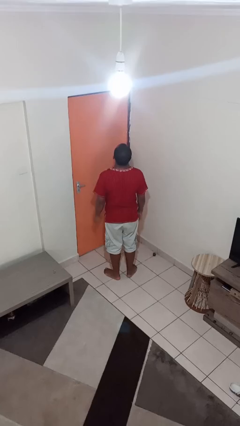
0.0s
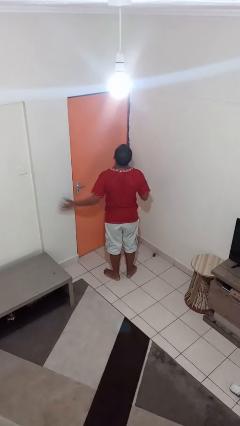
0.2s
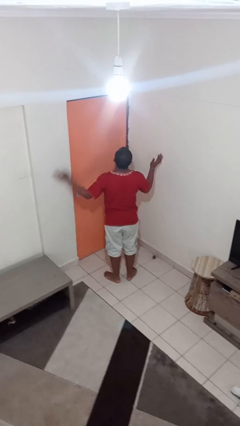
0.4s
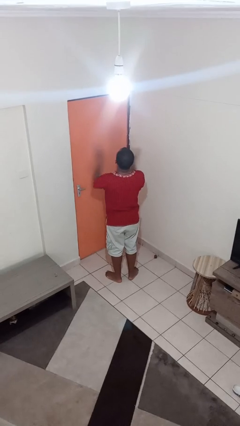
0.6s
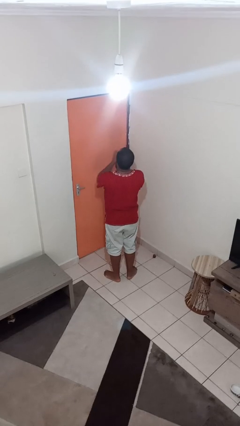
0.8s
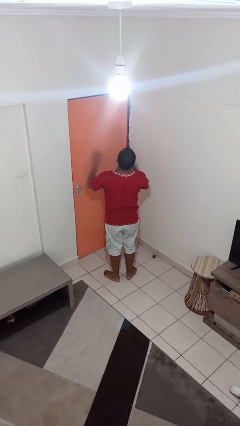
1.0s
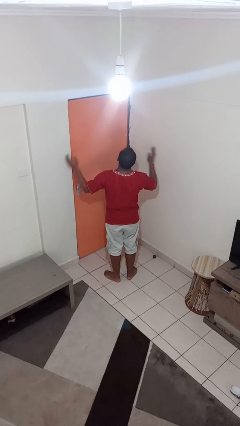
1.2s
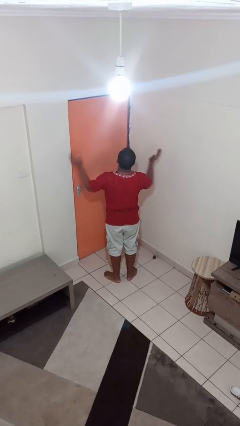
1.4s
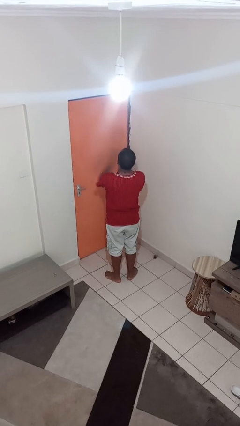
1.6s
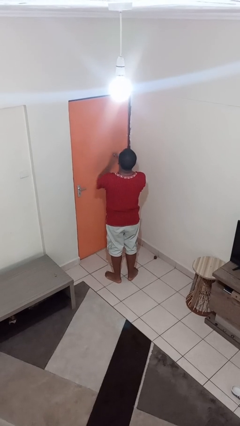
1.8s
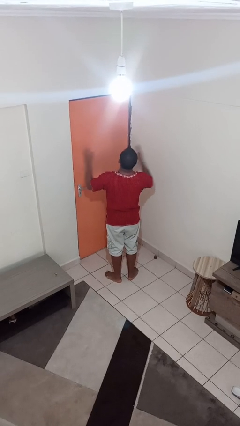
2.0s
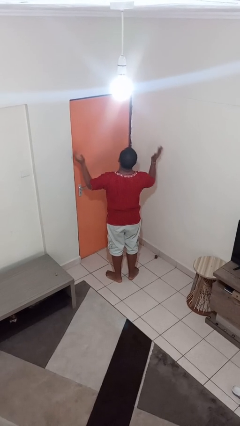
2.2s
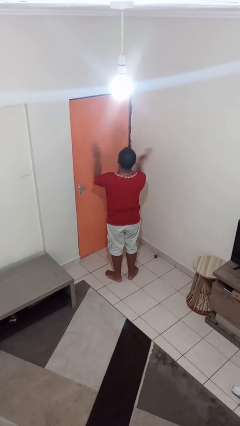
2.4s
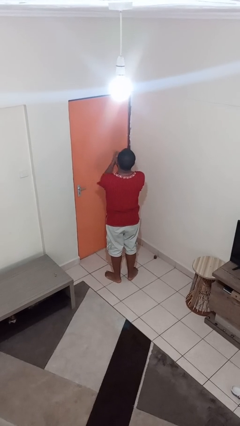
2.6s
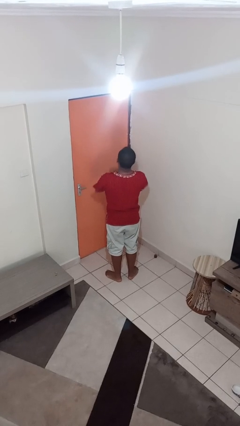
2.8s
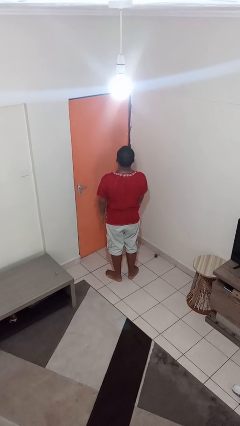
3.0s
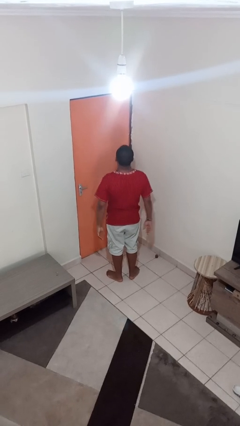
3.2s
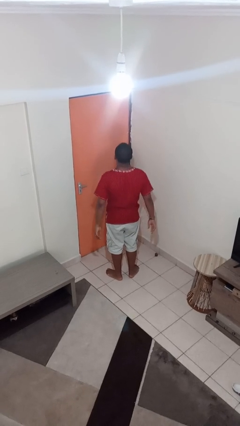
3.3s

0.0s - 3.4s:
person claps hands

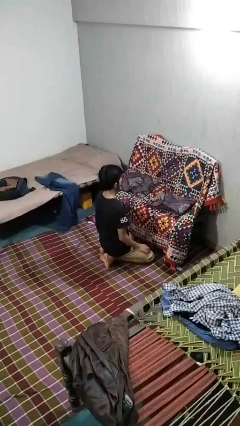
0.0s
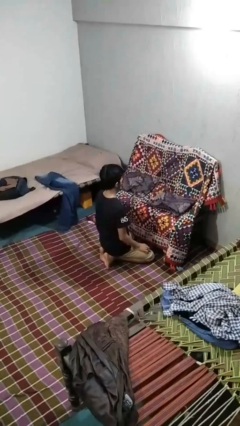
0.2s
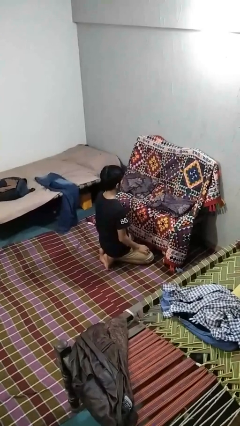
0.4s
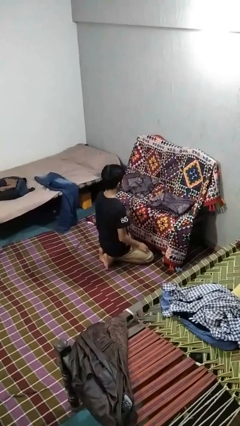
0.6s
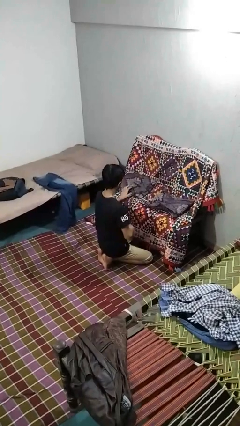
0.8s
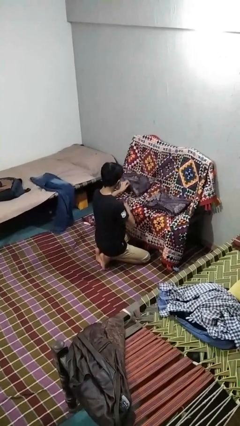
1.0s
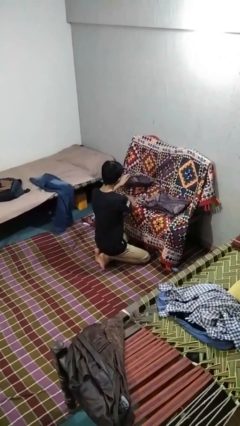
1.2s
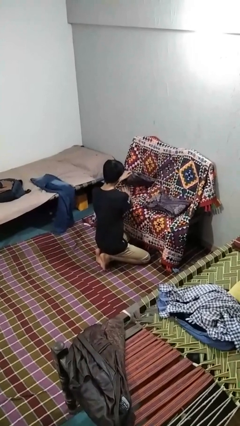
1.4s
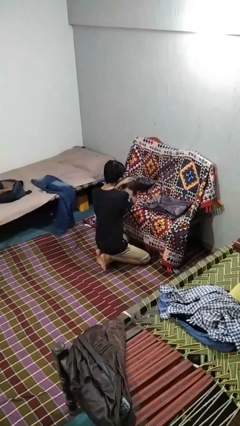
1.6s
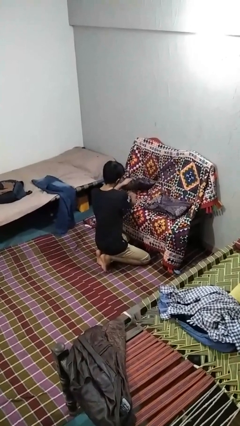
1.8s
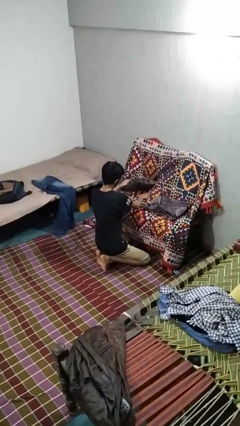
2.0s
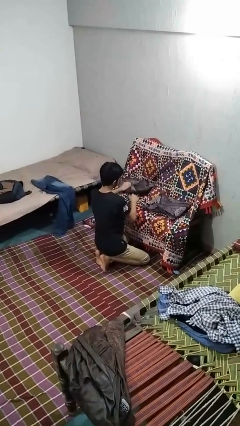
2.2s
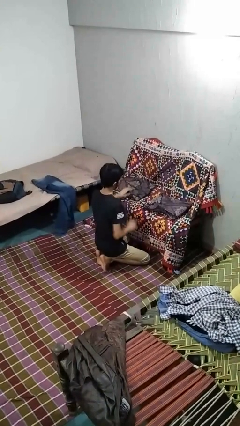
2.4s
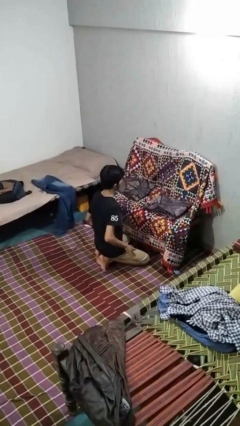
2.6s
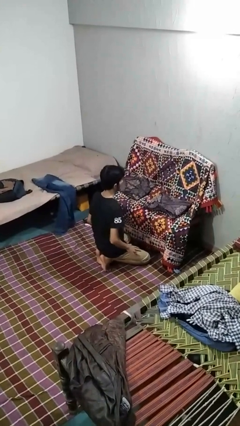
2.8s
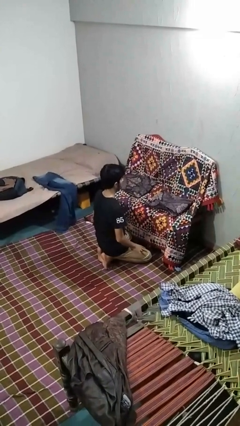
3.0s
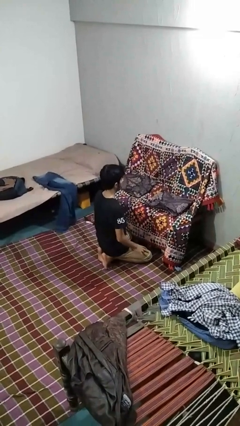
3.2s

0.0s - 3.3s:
person searches in couch

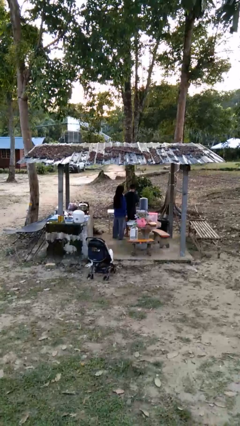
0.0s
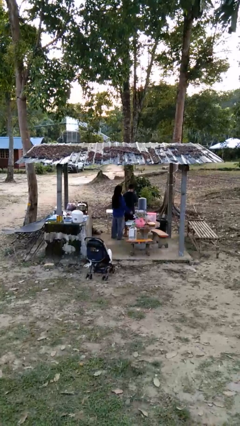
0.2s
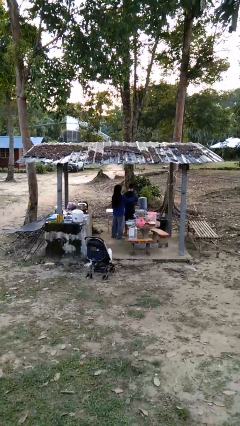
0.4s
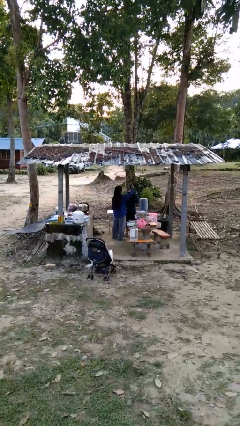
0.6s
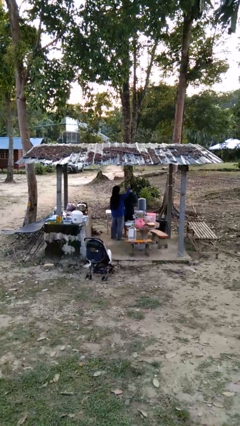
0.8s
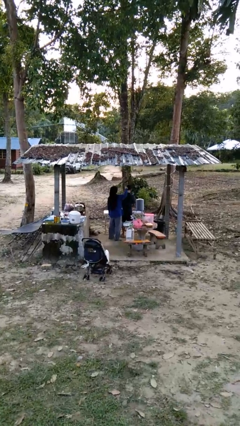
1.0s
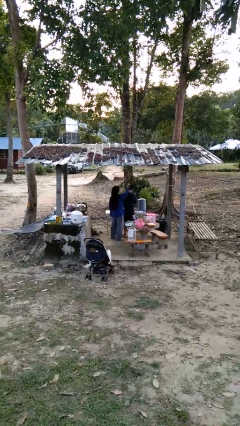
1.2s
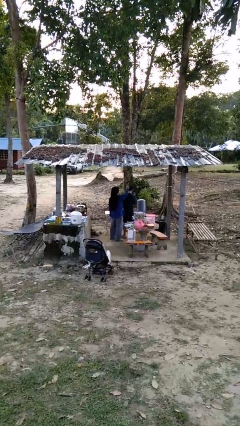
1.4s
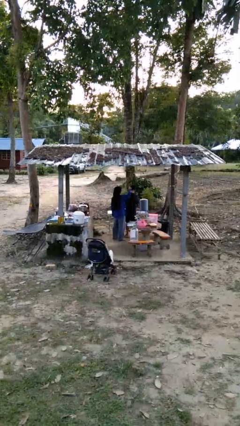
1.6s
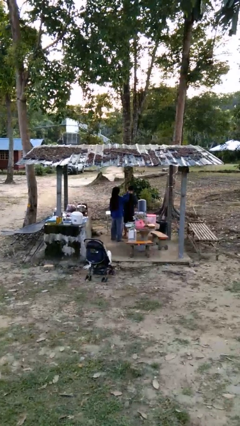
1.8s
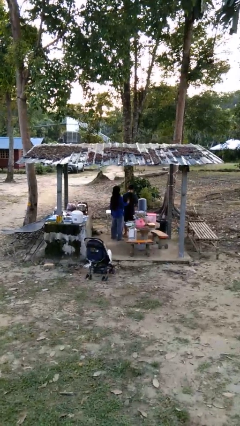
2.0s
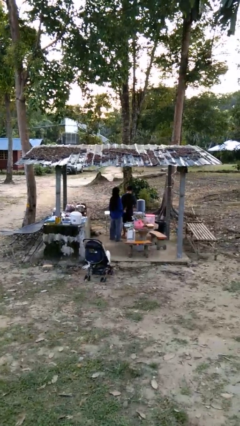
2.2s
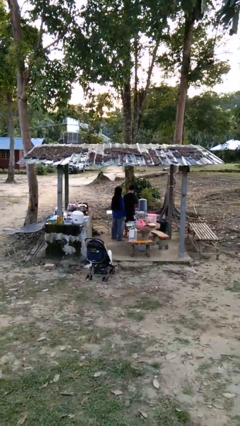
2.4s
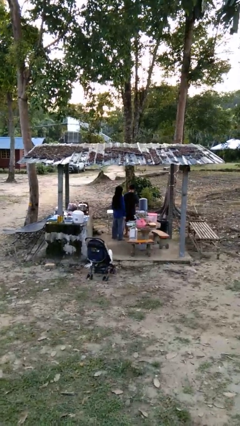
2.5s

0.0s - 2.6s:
person brushes hair of person

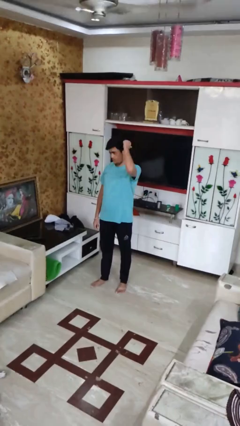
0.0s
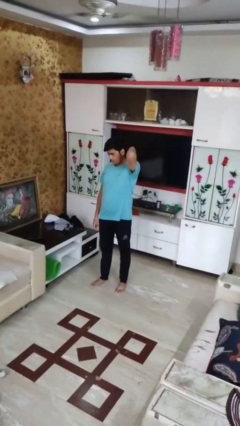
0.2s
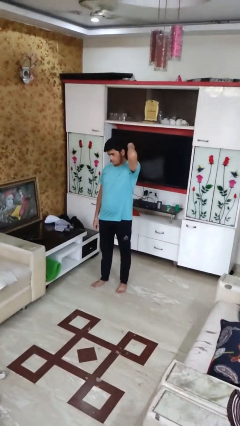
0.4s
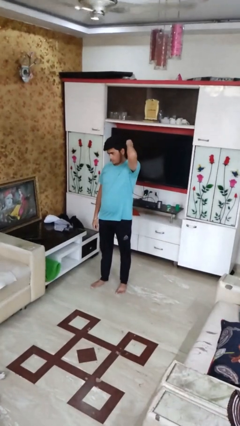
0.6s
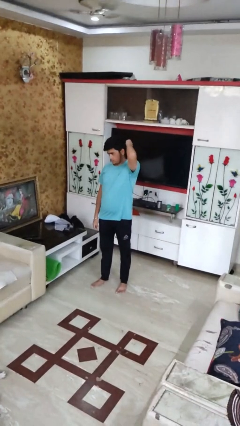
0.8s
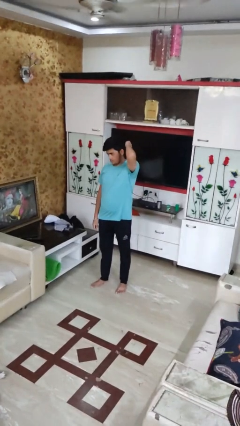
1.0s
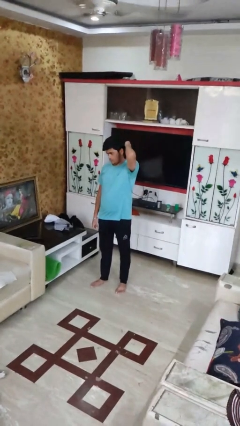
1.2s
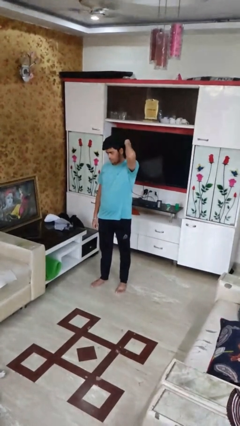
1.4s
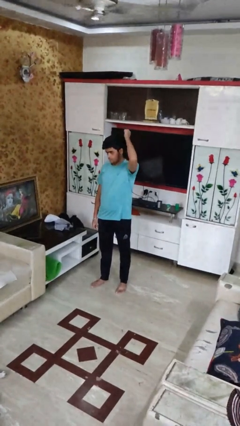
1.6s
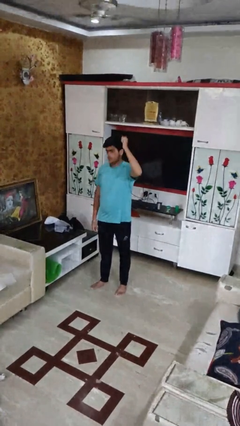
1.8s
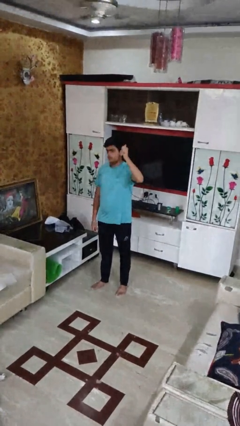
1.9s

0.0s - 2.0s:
person gestures behind me

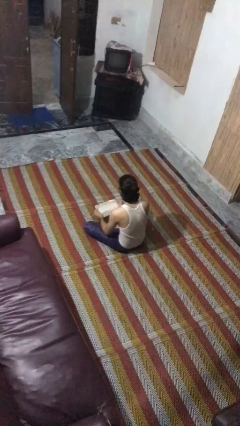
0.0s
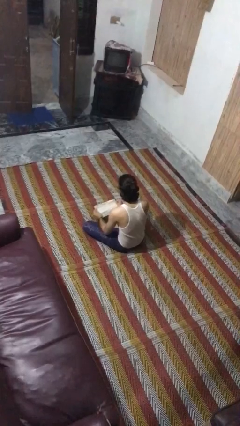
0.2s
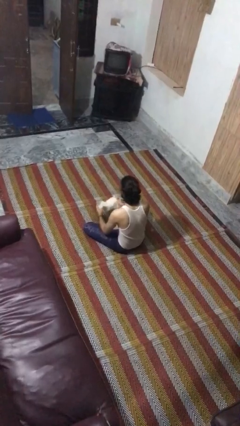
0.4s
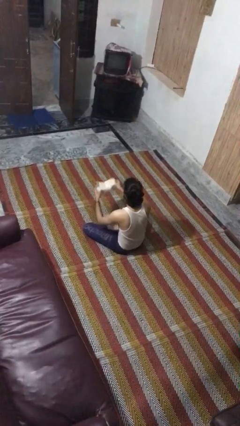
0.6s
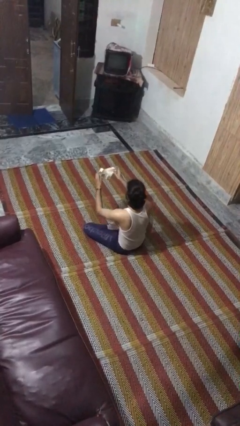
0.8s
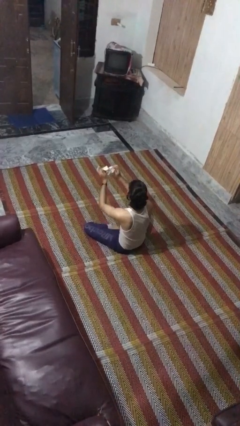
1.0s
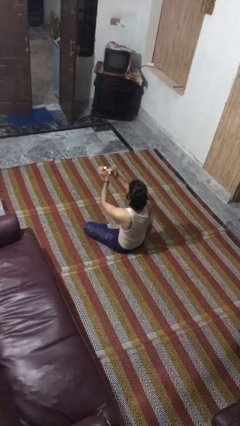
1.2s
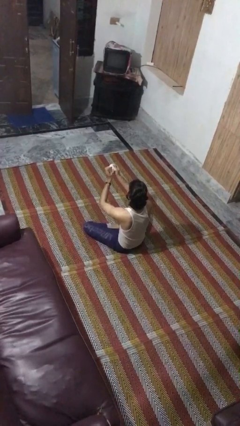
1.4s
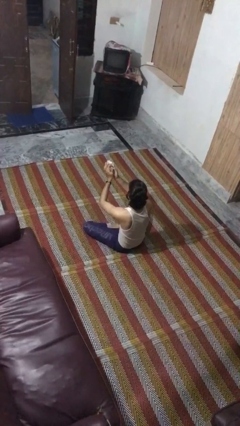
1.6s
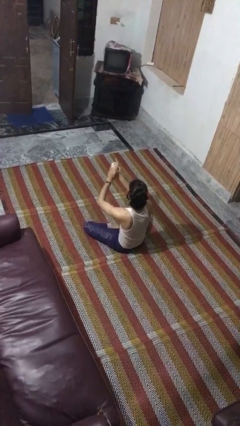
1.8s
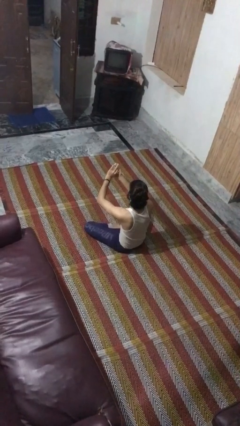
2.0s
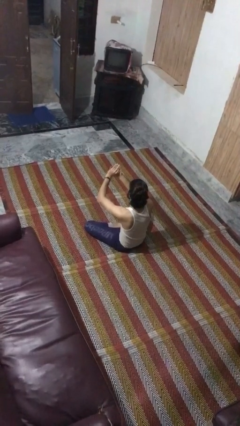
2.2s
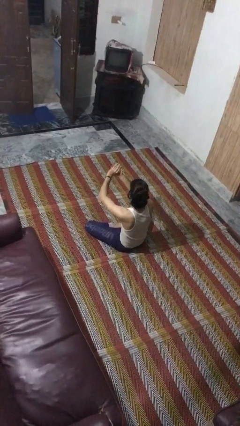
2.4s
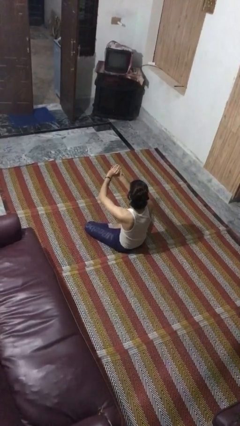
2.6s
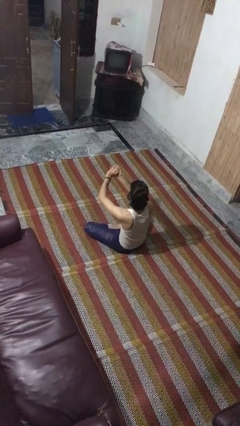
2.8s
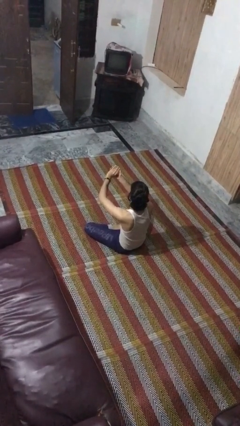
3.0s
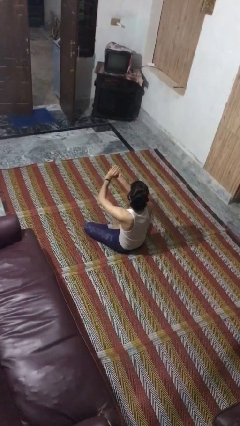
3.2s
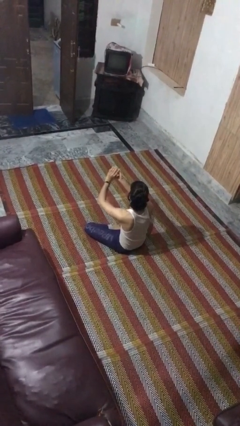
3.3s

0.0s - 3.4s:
person crumples paper

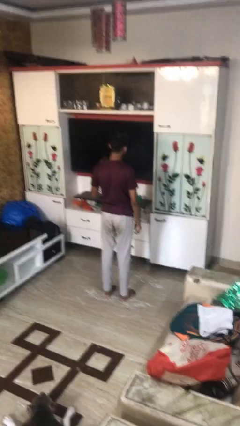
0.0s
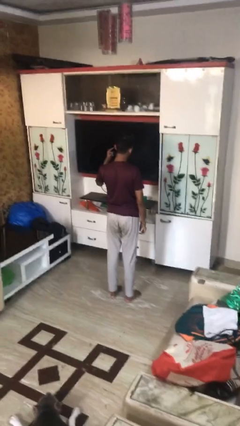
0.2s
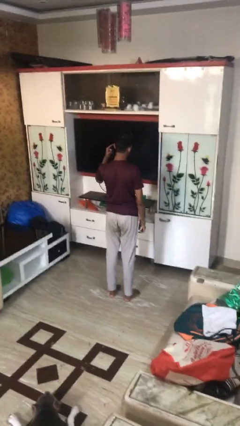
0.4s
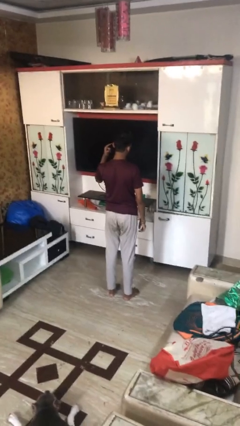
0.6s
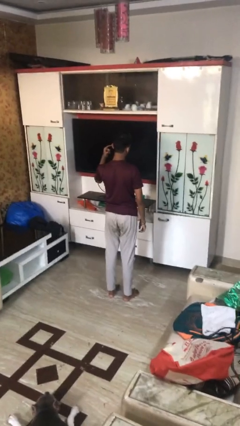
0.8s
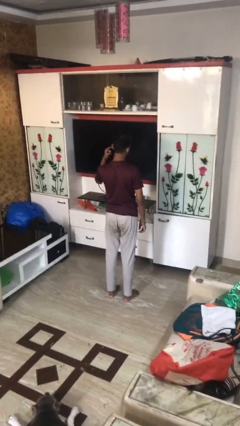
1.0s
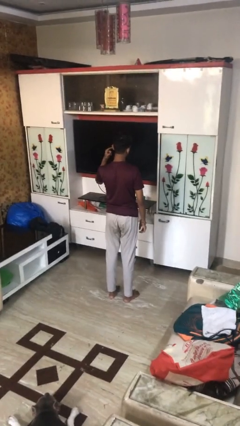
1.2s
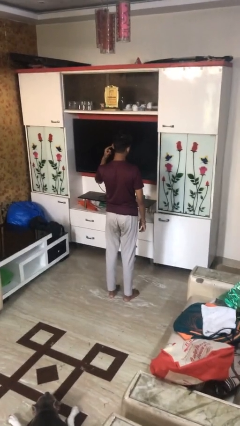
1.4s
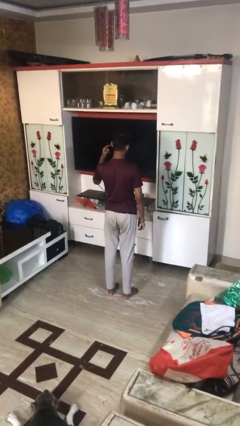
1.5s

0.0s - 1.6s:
person gestures listen closely

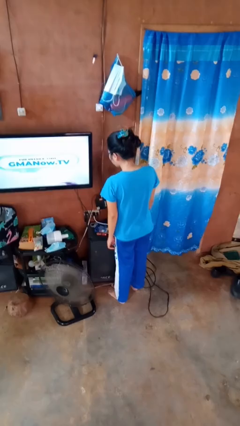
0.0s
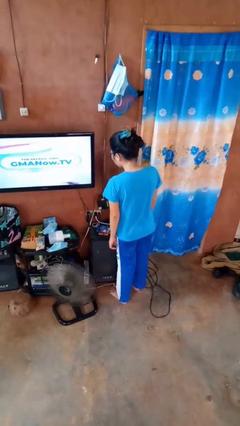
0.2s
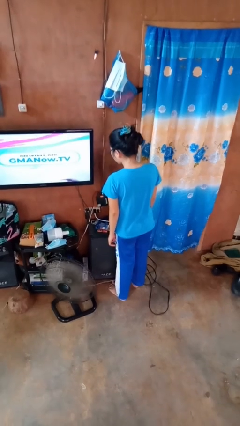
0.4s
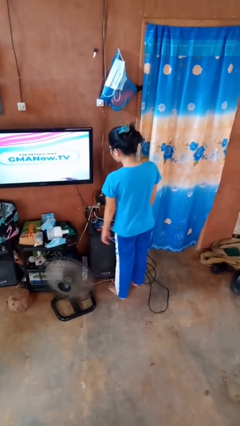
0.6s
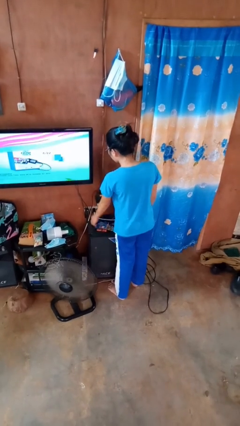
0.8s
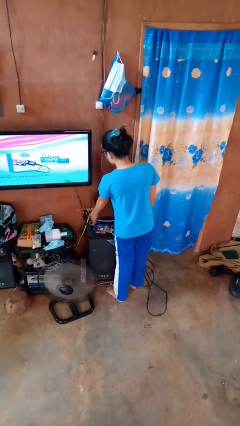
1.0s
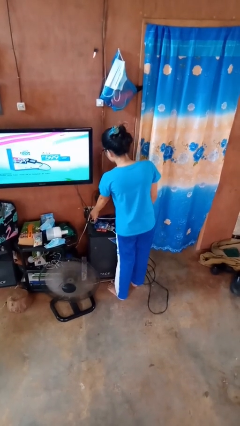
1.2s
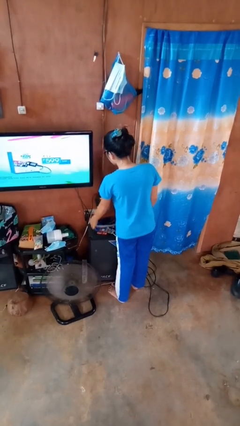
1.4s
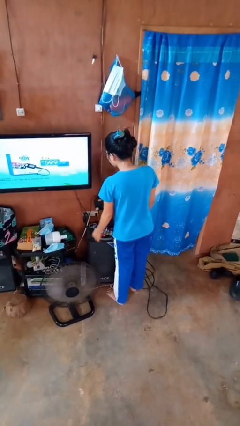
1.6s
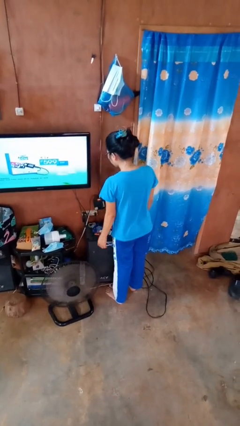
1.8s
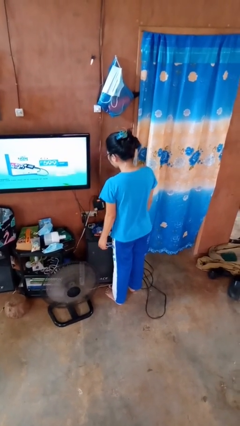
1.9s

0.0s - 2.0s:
person unplugs from electrical socket
